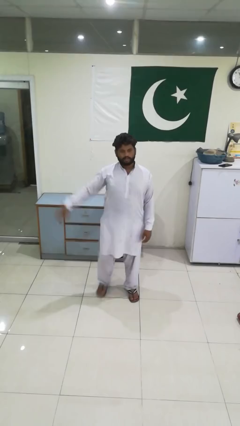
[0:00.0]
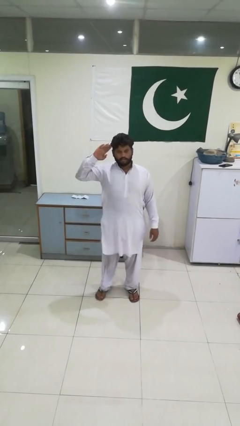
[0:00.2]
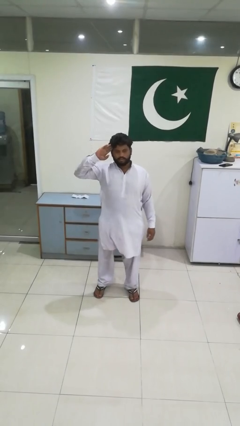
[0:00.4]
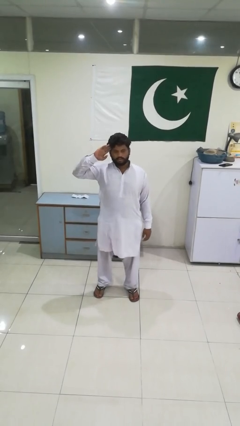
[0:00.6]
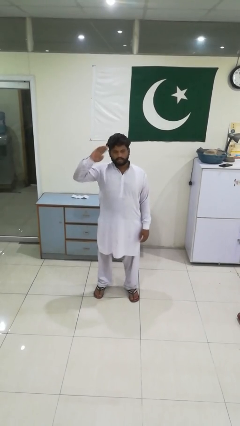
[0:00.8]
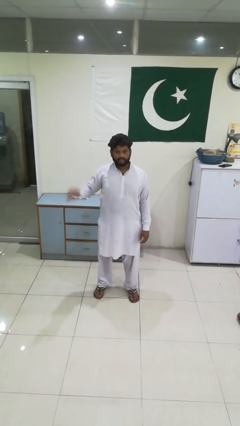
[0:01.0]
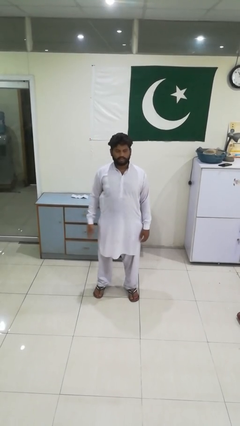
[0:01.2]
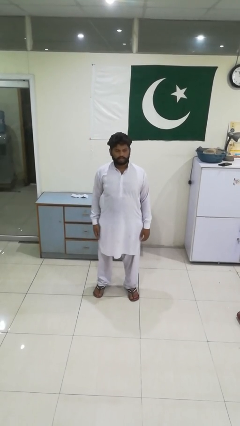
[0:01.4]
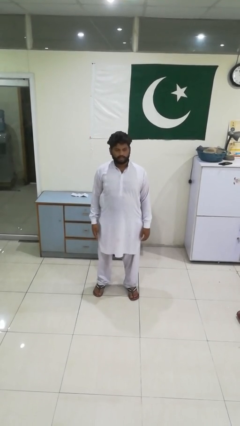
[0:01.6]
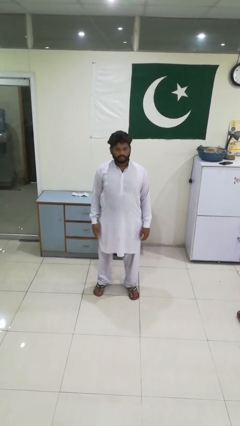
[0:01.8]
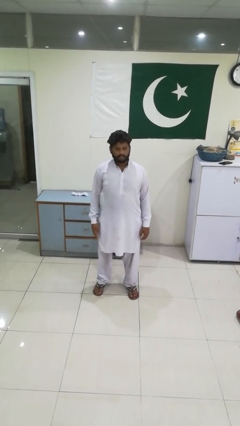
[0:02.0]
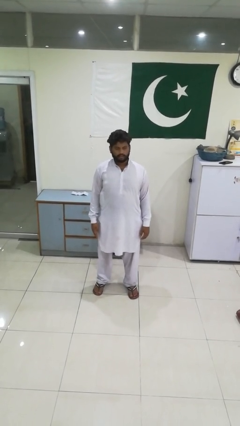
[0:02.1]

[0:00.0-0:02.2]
person salutes

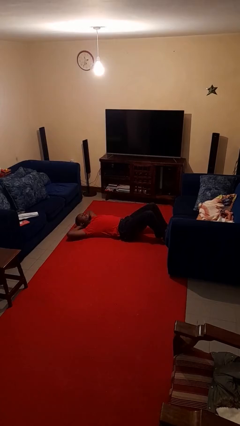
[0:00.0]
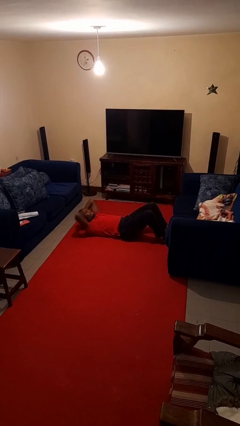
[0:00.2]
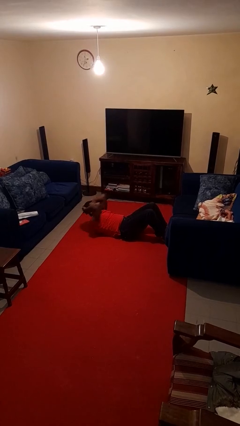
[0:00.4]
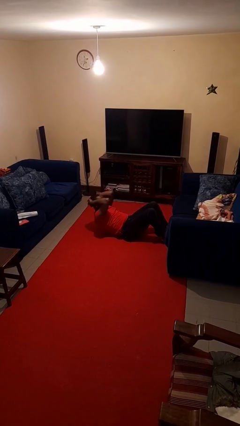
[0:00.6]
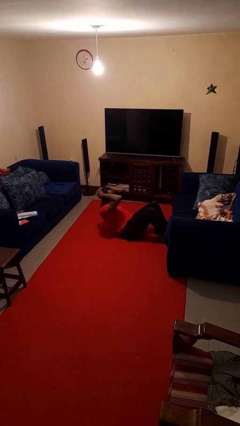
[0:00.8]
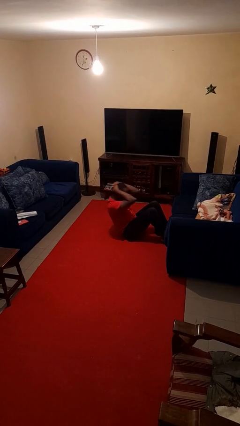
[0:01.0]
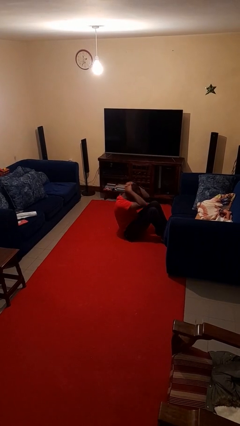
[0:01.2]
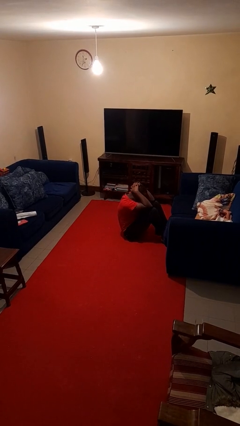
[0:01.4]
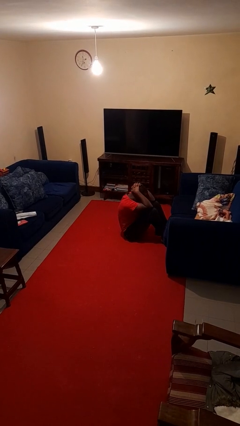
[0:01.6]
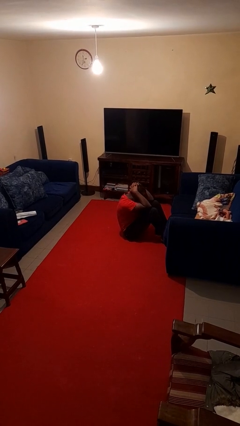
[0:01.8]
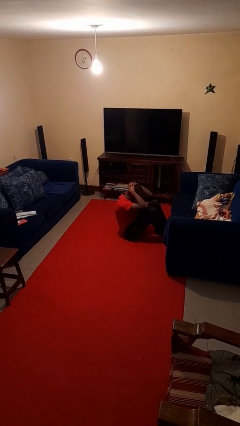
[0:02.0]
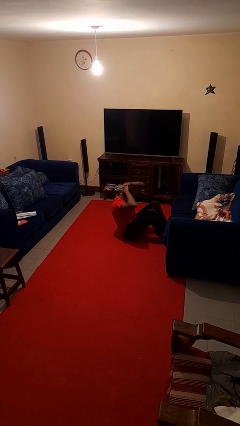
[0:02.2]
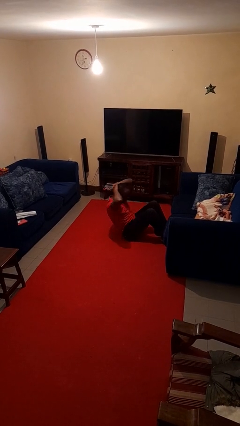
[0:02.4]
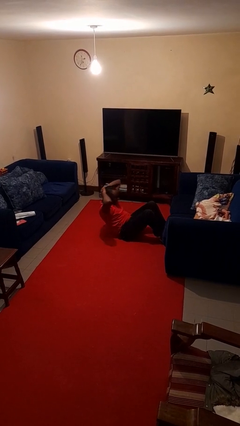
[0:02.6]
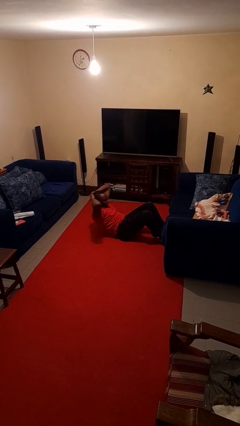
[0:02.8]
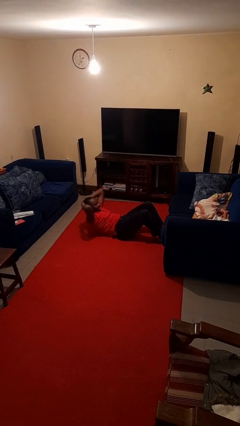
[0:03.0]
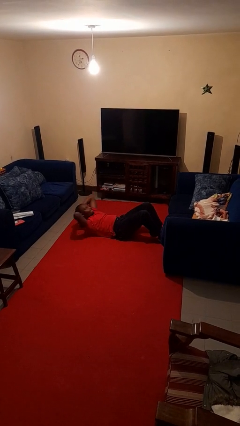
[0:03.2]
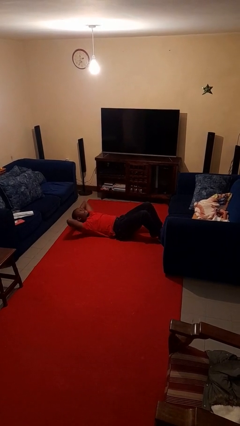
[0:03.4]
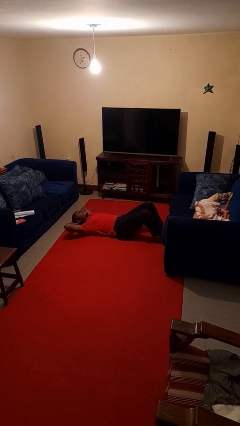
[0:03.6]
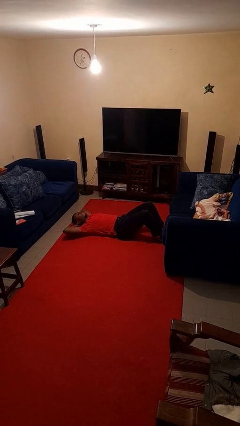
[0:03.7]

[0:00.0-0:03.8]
person exercises with situp

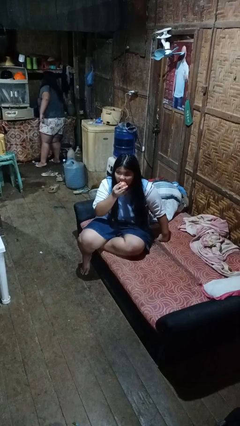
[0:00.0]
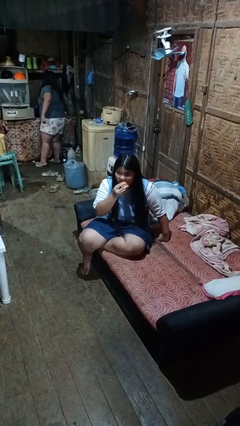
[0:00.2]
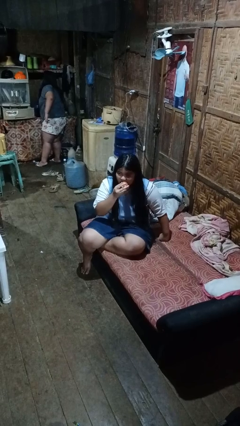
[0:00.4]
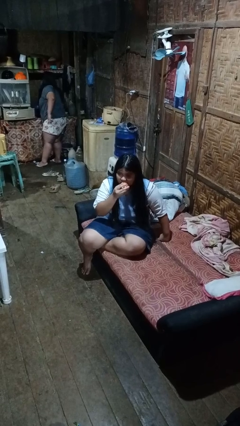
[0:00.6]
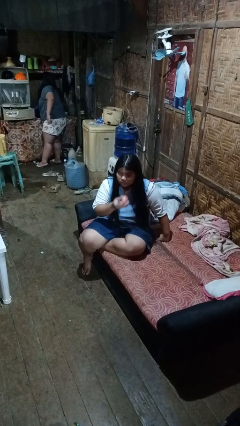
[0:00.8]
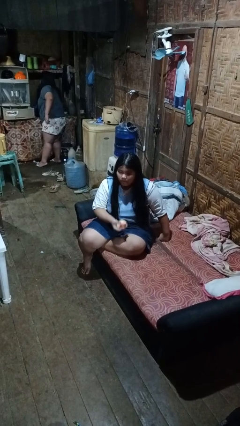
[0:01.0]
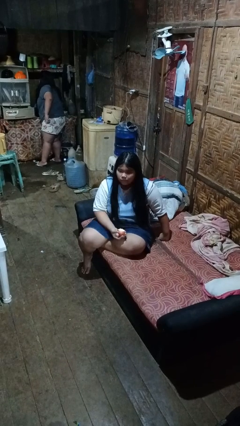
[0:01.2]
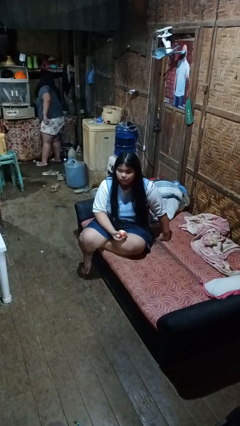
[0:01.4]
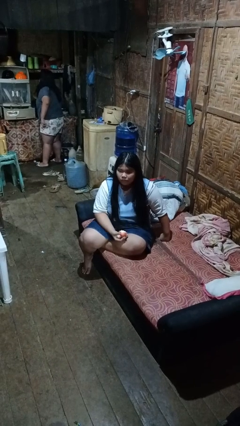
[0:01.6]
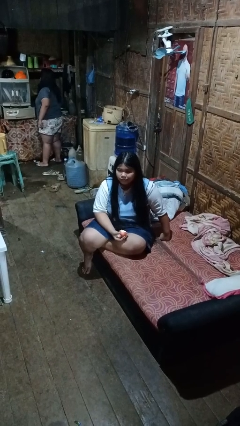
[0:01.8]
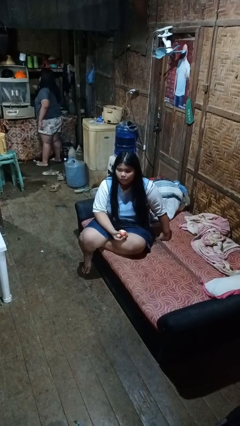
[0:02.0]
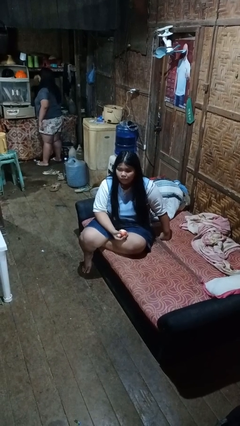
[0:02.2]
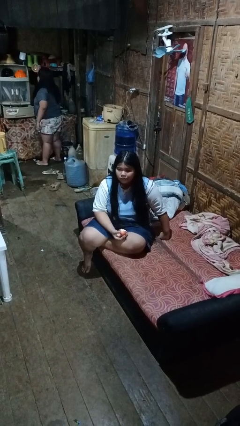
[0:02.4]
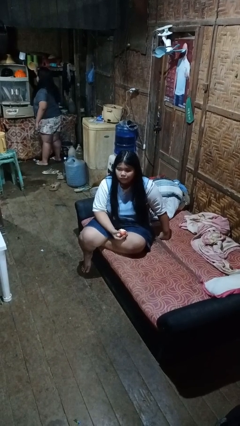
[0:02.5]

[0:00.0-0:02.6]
person eats apple

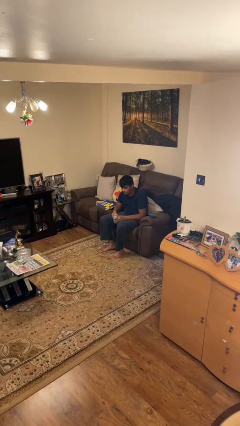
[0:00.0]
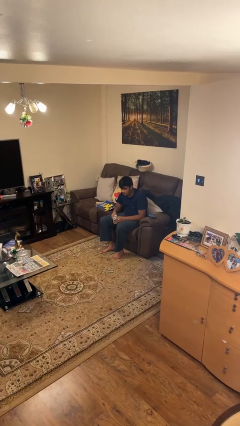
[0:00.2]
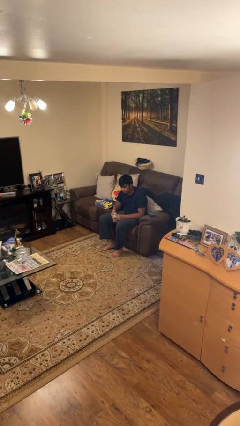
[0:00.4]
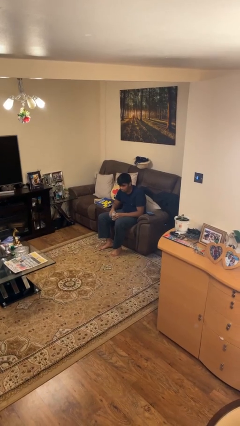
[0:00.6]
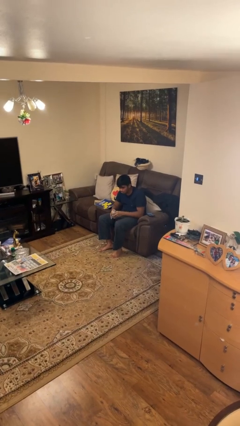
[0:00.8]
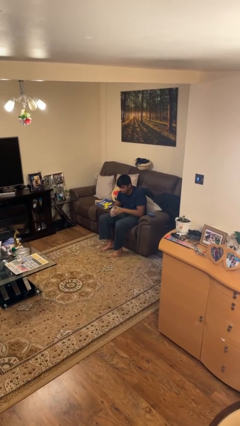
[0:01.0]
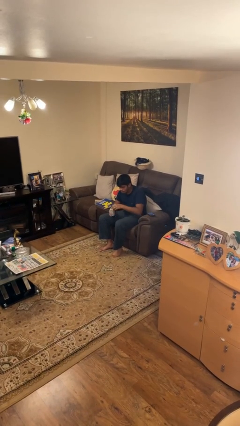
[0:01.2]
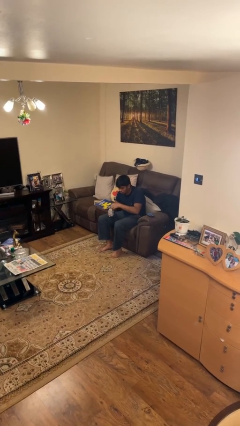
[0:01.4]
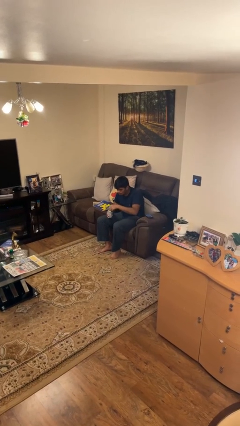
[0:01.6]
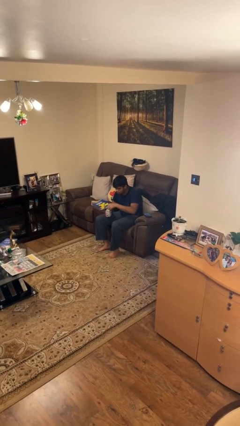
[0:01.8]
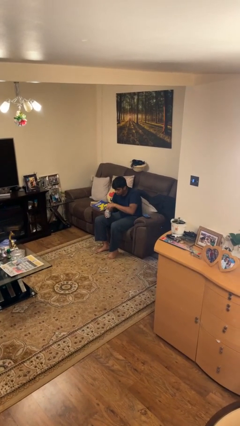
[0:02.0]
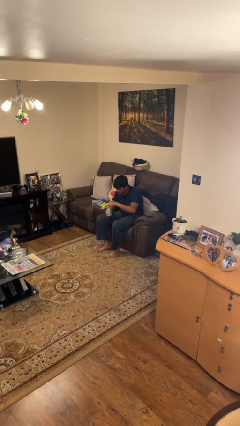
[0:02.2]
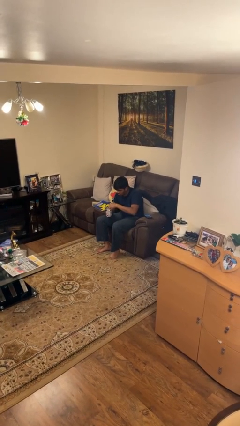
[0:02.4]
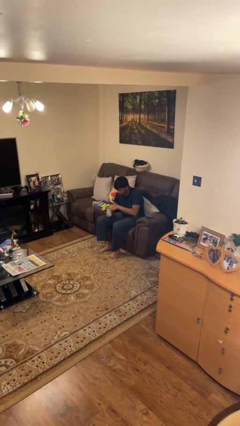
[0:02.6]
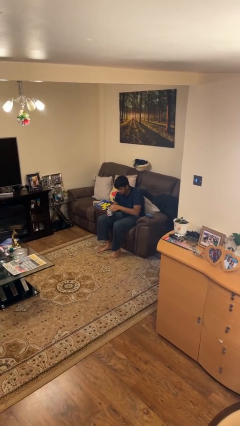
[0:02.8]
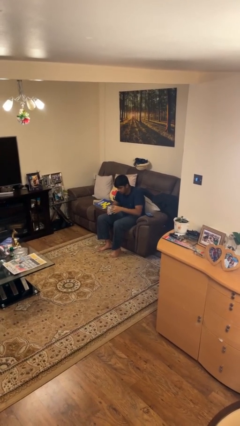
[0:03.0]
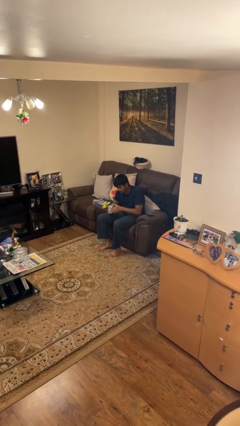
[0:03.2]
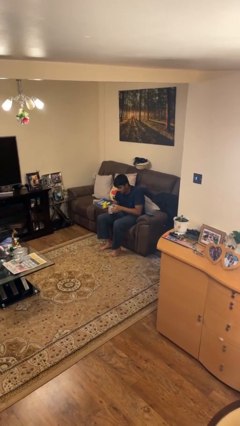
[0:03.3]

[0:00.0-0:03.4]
person opens beverage can

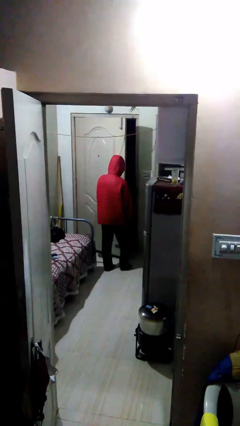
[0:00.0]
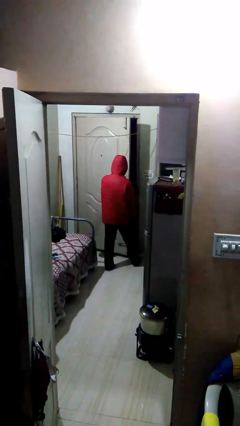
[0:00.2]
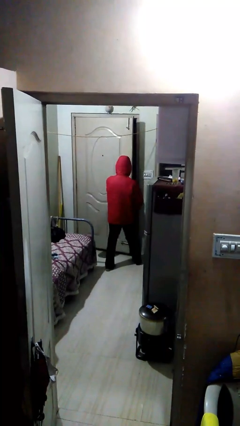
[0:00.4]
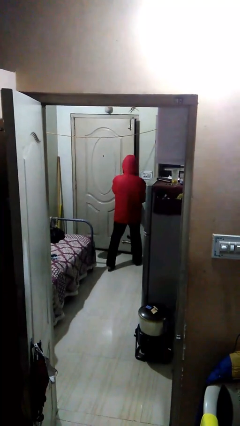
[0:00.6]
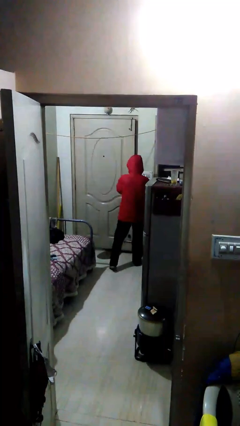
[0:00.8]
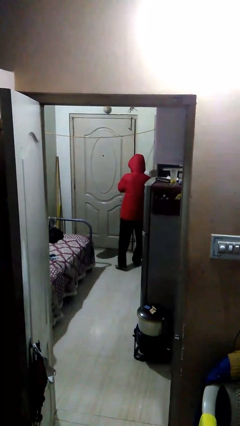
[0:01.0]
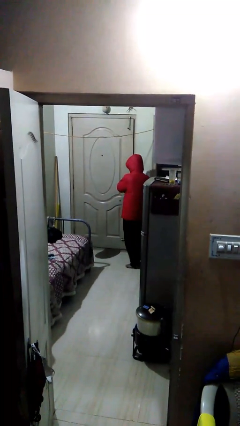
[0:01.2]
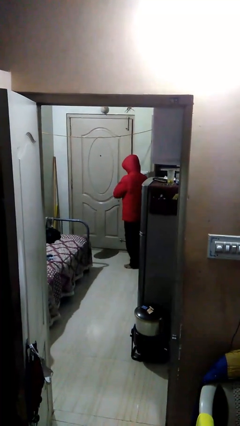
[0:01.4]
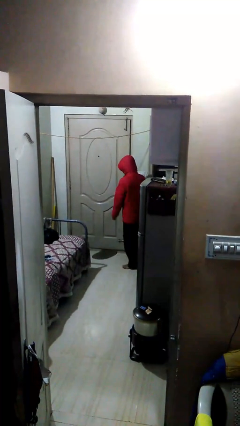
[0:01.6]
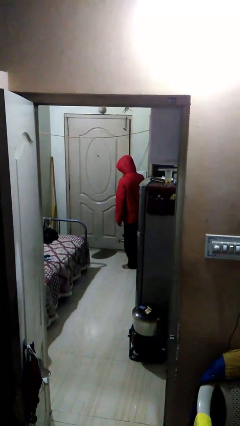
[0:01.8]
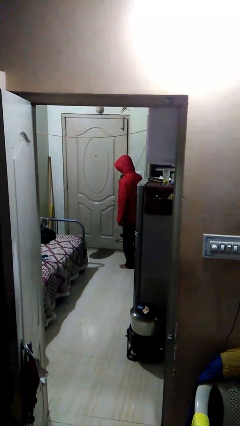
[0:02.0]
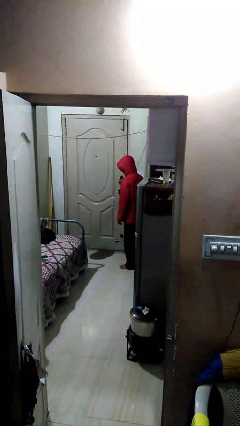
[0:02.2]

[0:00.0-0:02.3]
person closes facility door

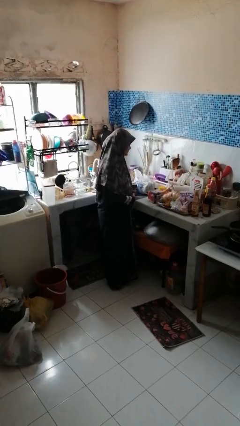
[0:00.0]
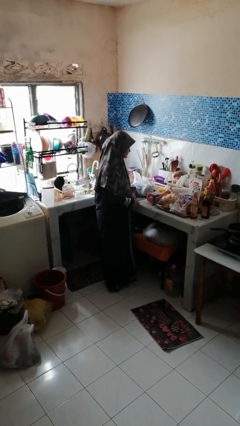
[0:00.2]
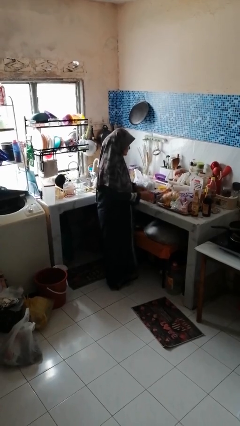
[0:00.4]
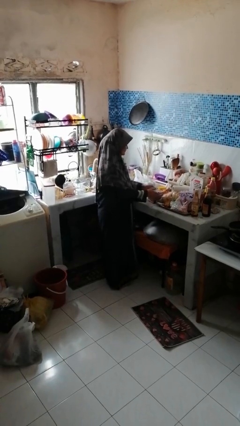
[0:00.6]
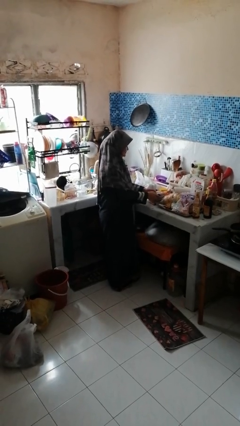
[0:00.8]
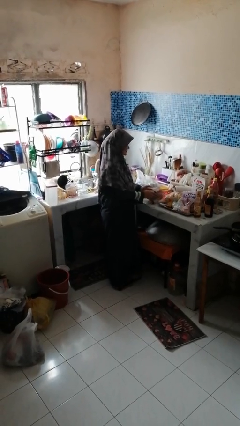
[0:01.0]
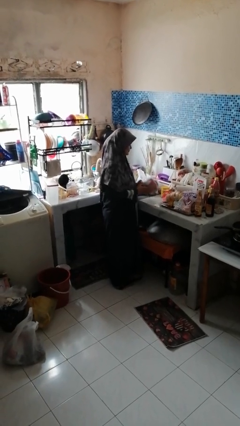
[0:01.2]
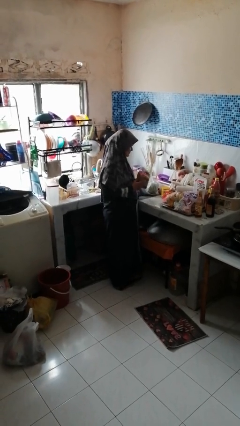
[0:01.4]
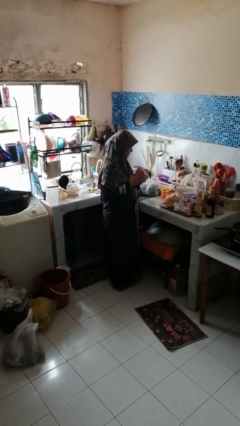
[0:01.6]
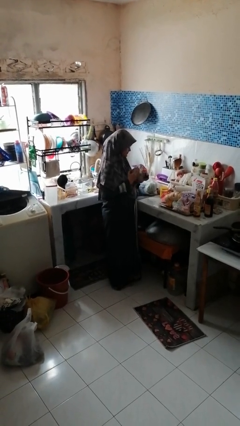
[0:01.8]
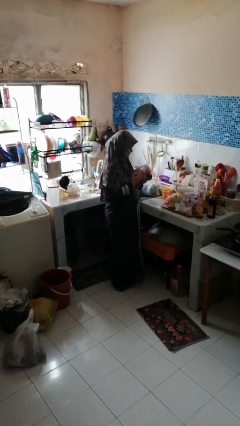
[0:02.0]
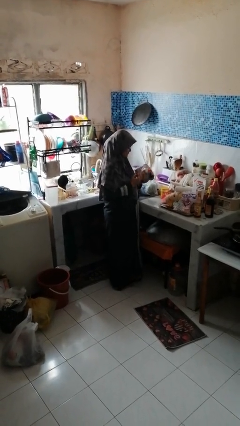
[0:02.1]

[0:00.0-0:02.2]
person picks up object from countertop

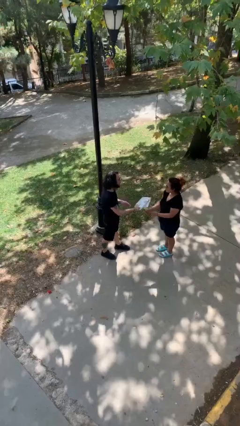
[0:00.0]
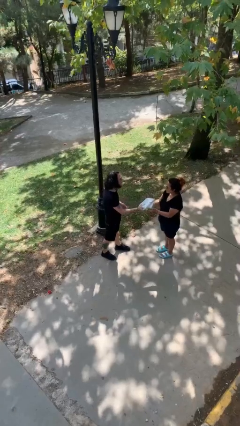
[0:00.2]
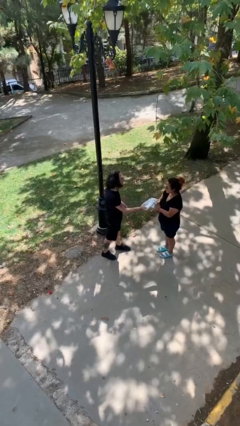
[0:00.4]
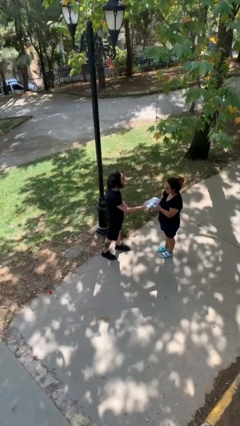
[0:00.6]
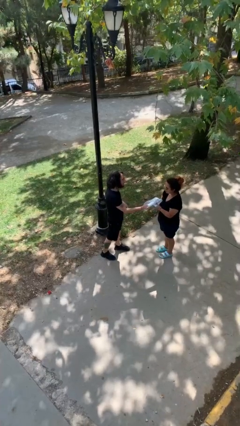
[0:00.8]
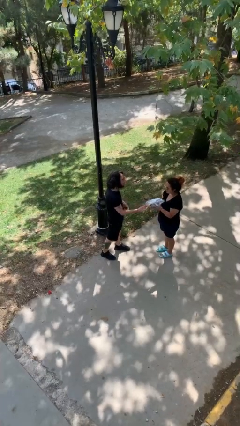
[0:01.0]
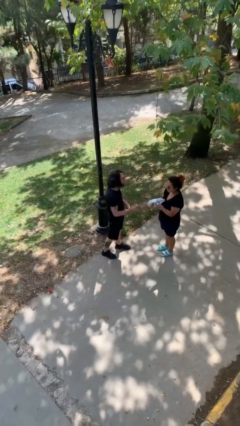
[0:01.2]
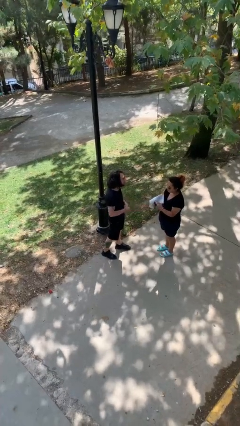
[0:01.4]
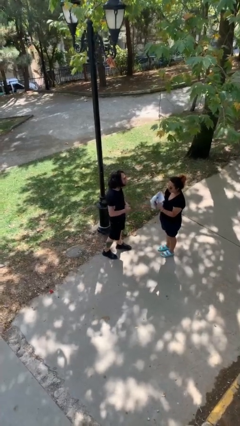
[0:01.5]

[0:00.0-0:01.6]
person transfers object to person
